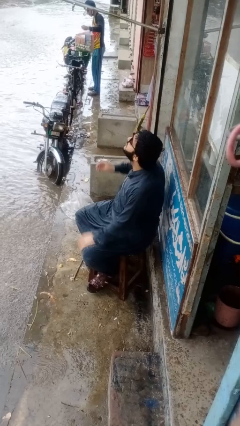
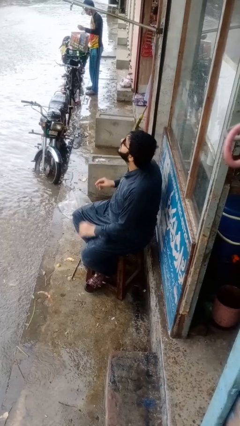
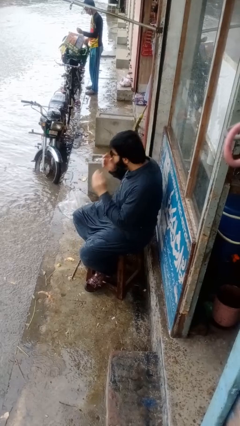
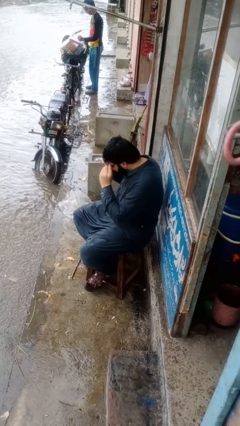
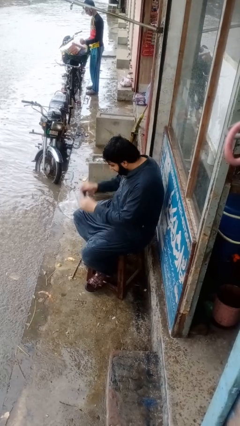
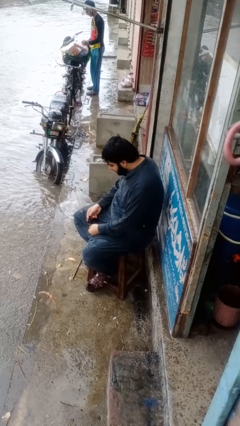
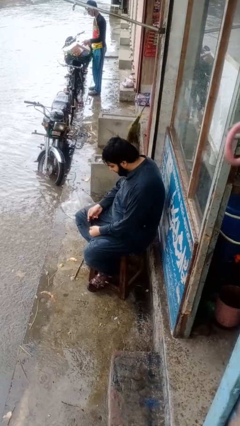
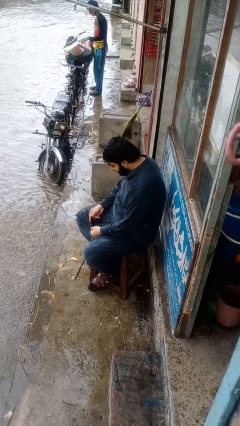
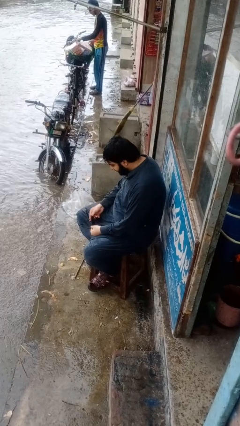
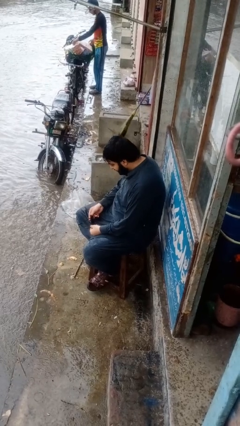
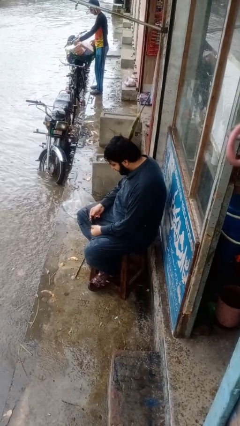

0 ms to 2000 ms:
person takes off glasses

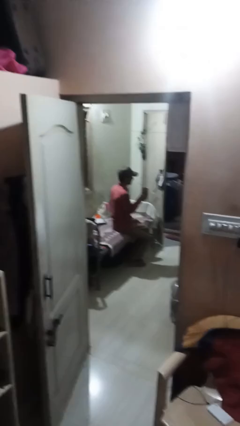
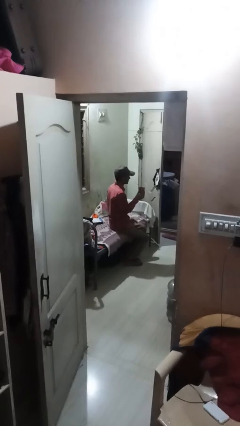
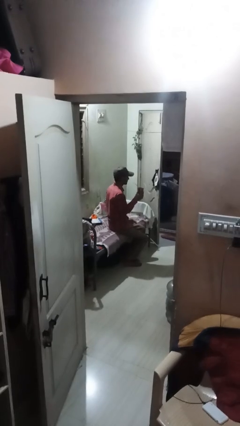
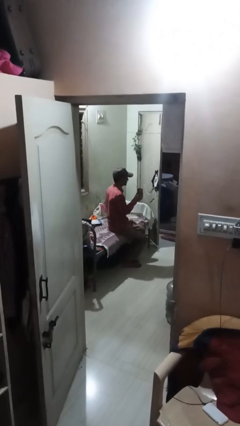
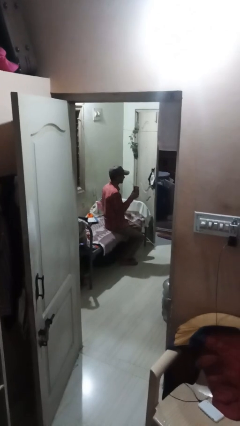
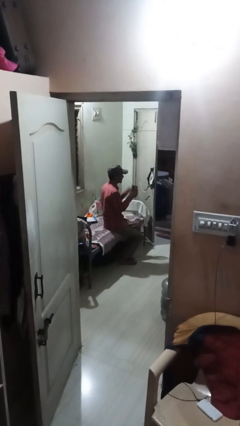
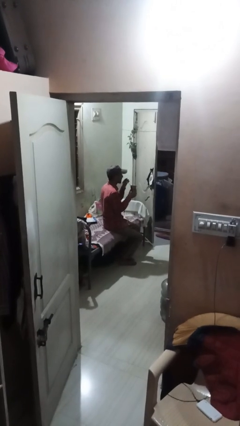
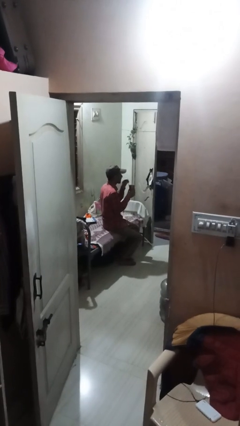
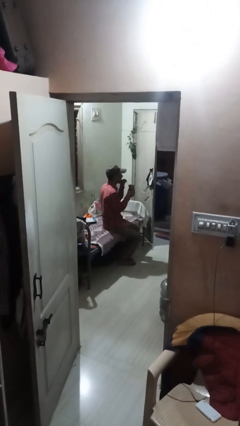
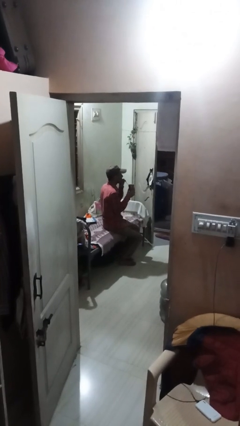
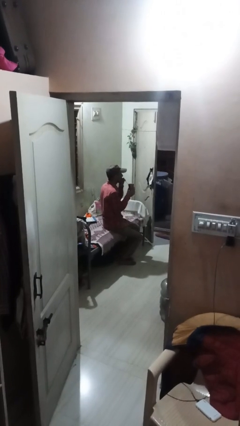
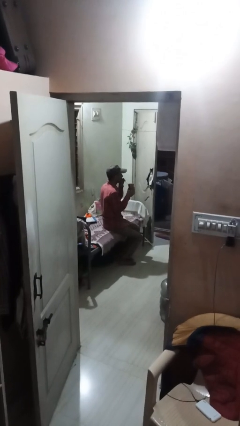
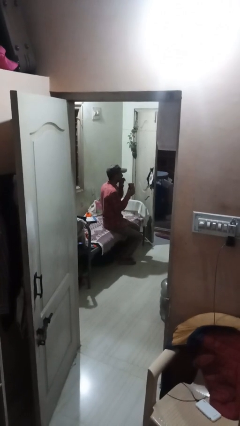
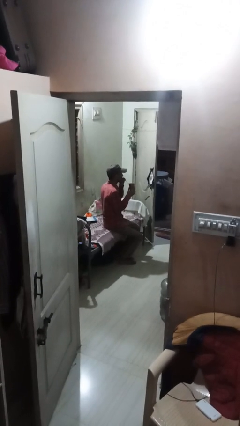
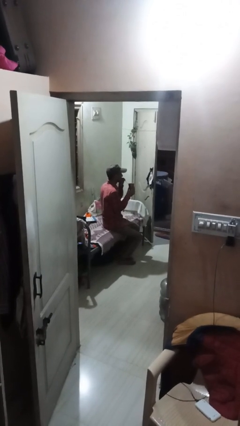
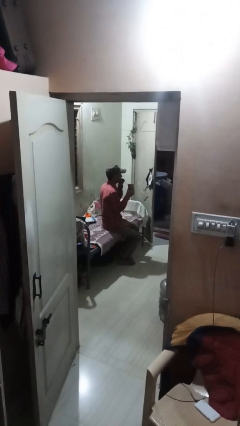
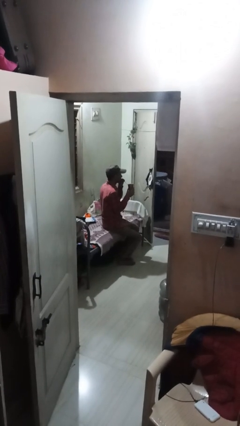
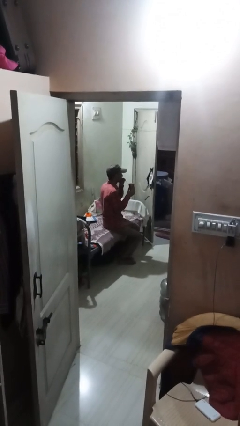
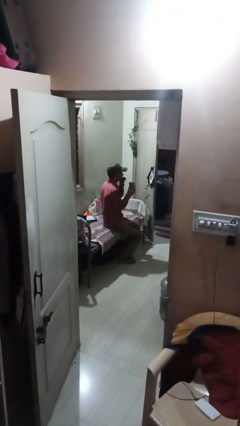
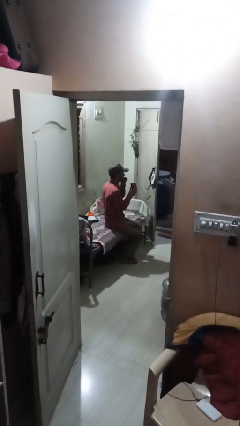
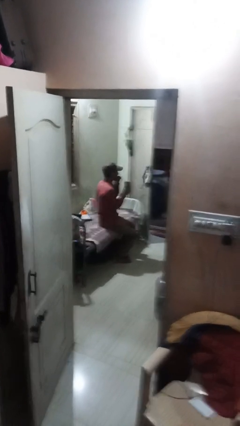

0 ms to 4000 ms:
person drinks from straw

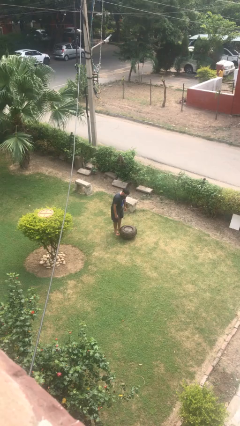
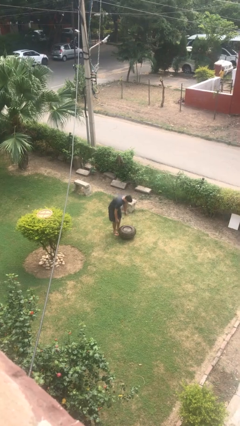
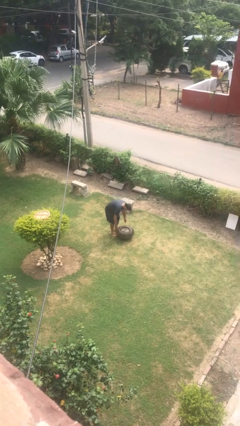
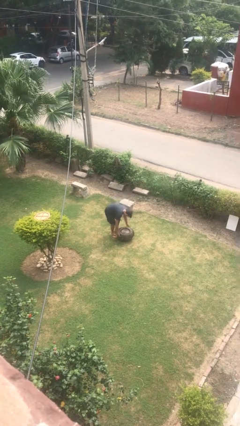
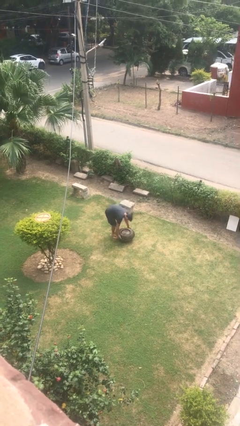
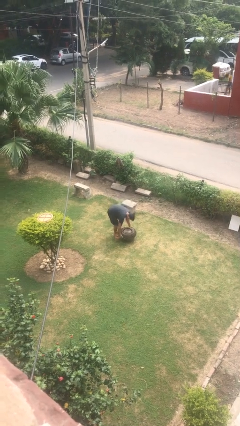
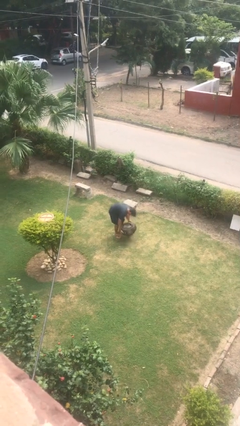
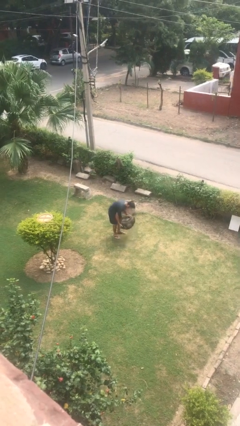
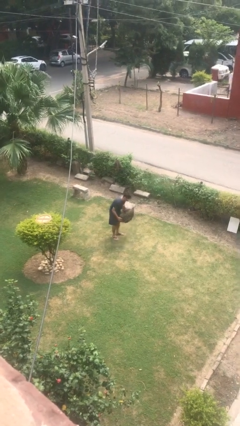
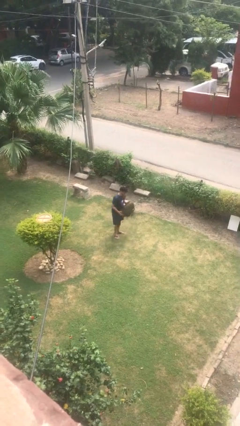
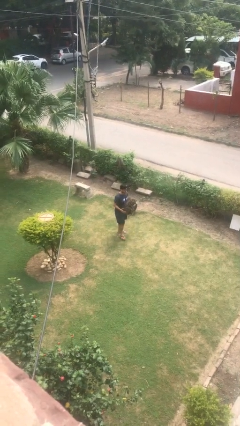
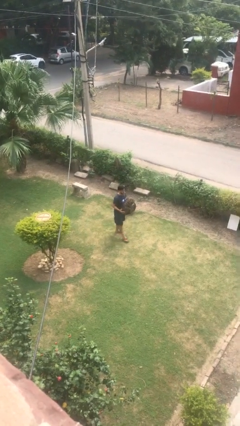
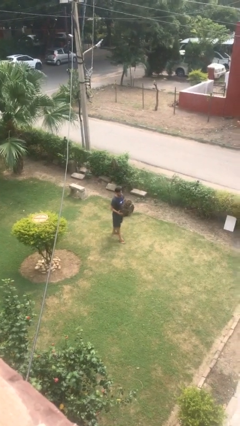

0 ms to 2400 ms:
person picks up object from floor

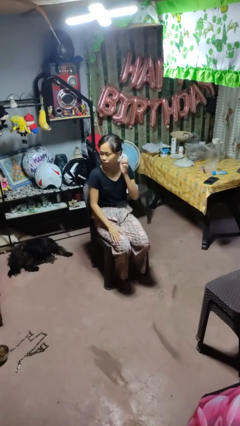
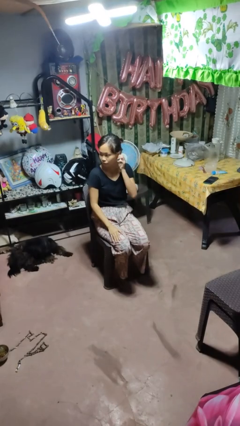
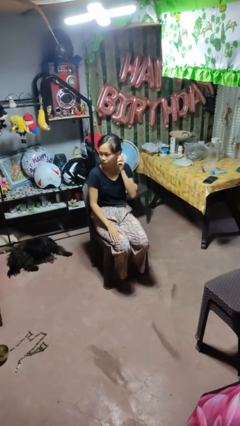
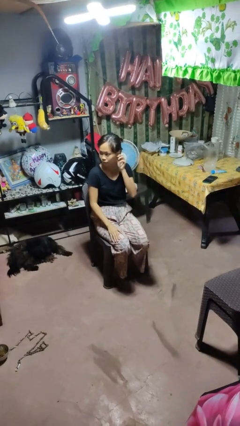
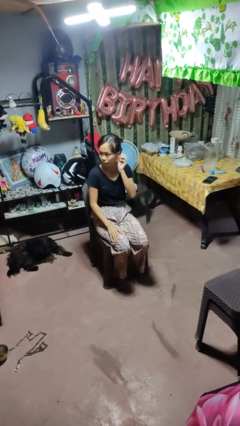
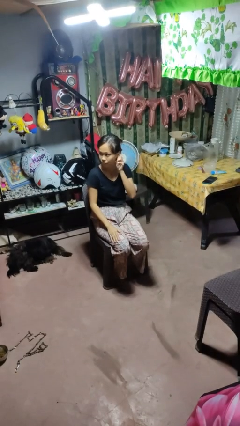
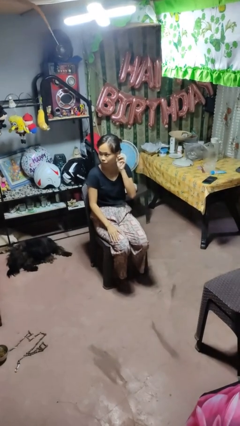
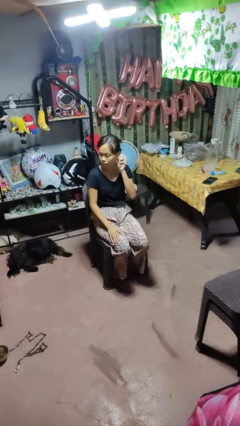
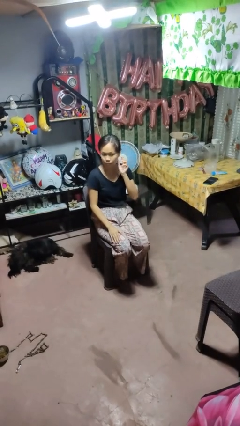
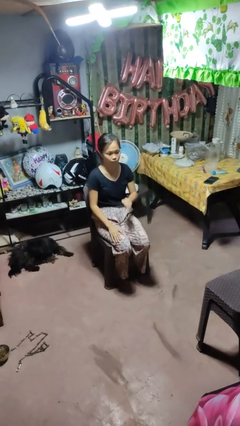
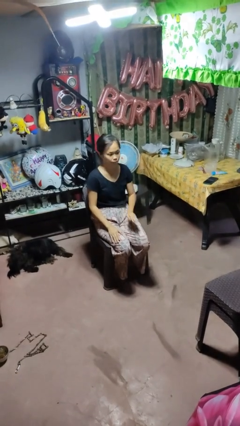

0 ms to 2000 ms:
person touches earlobe

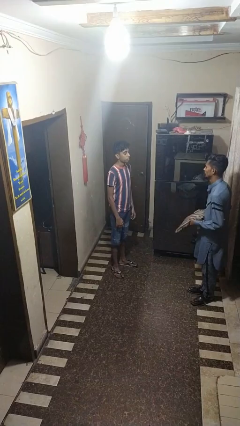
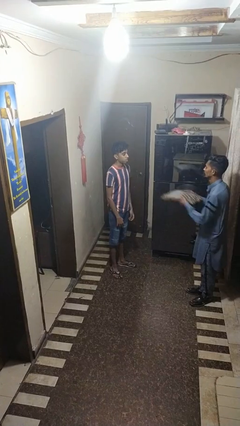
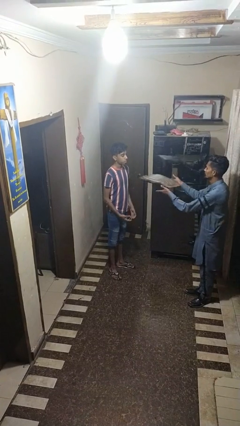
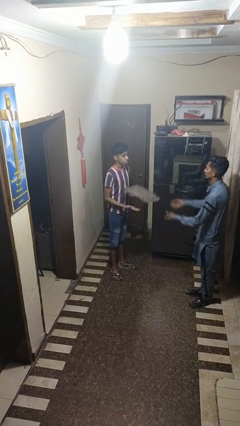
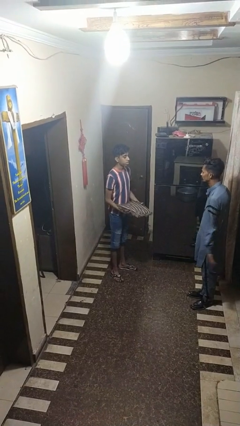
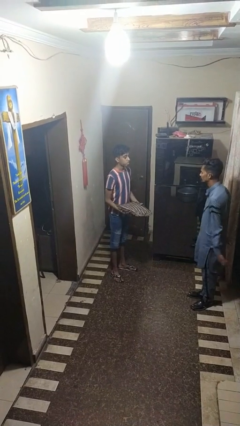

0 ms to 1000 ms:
person catches object from person

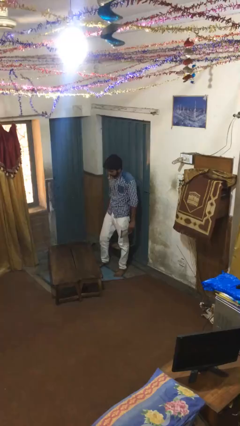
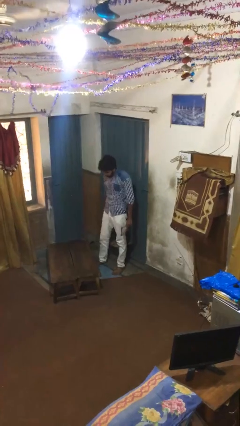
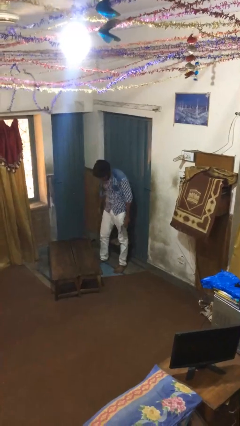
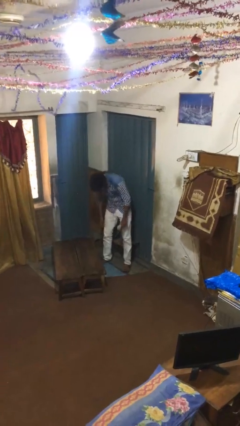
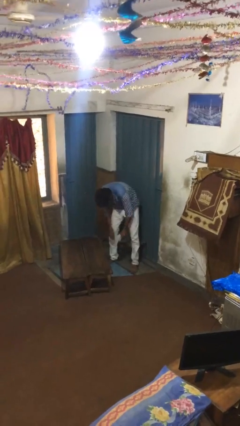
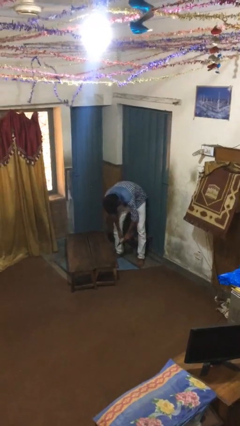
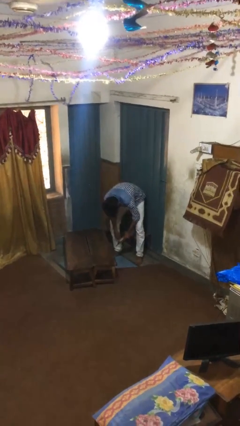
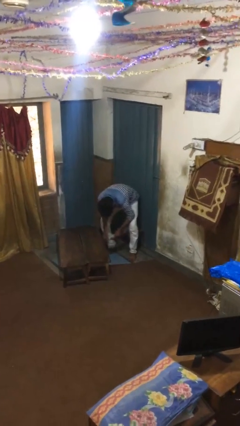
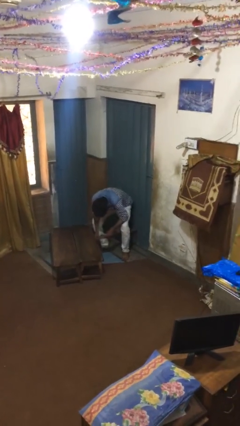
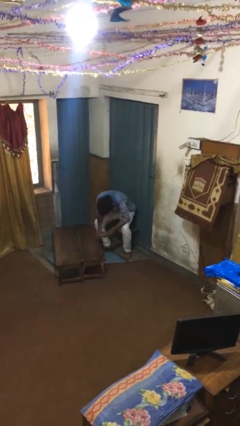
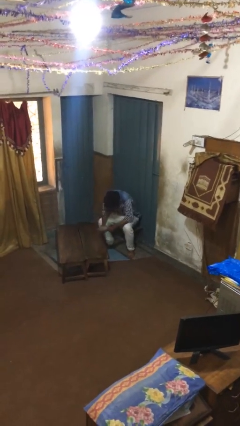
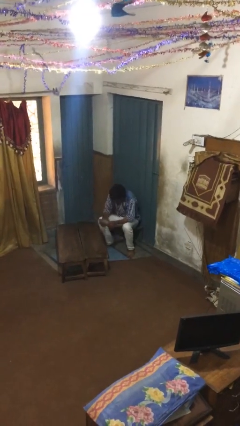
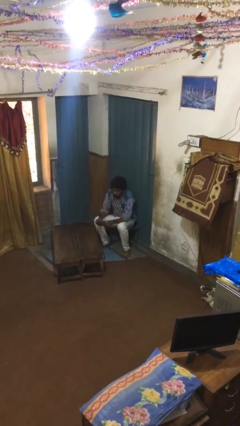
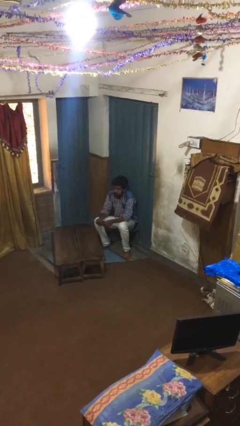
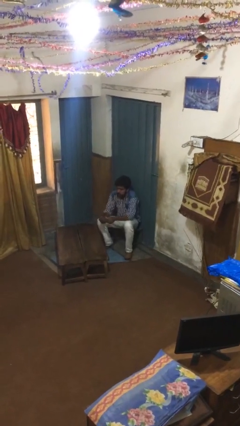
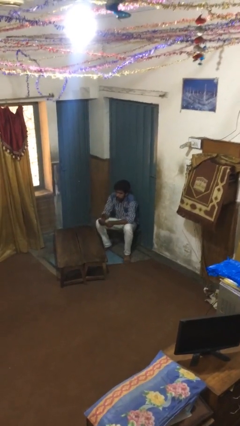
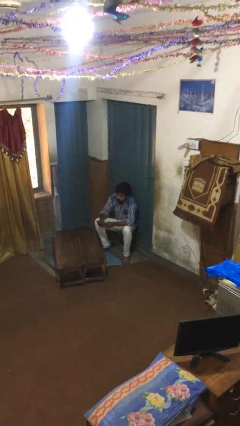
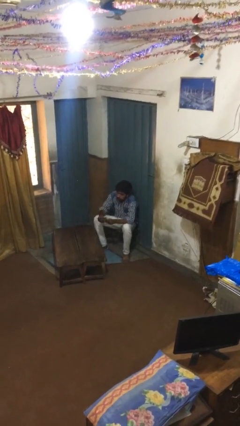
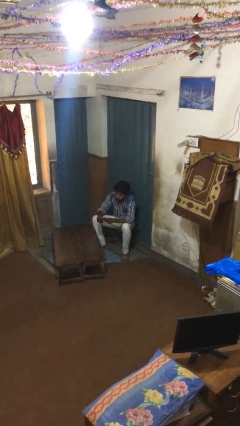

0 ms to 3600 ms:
person sits down

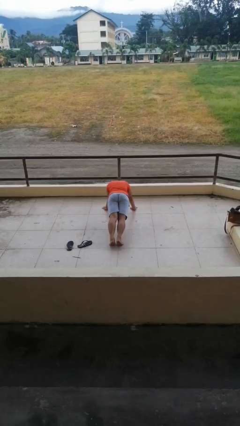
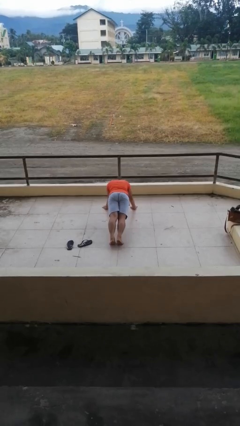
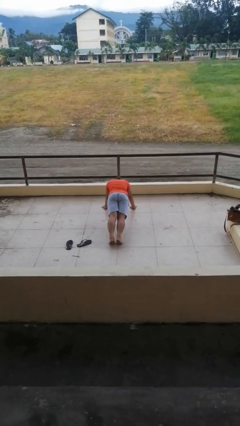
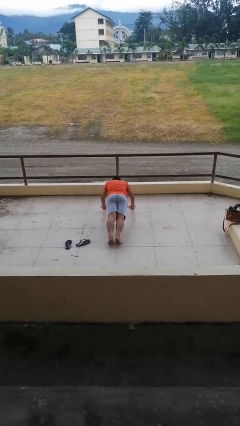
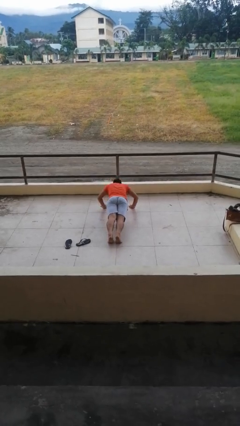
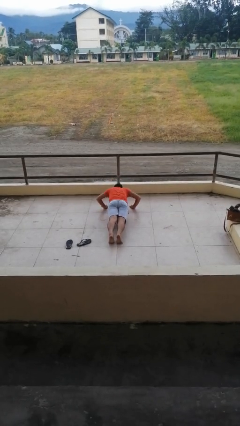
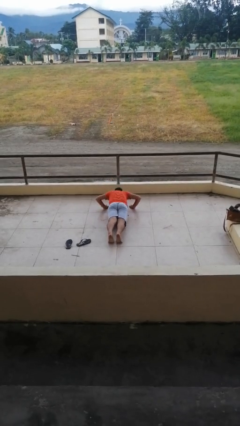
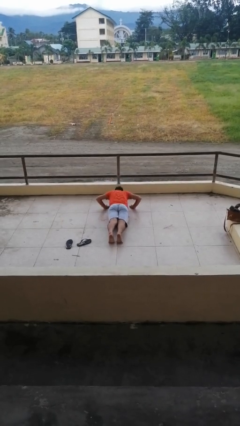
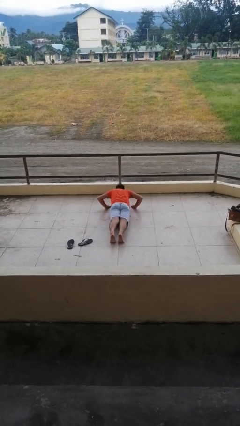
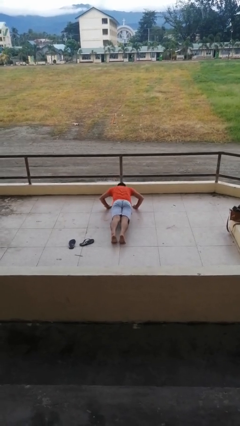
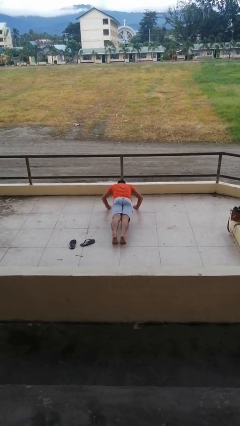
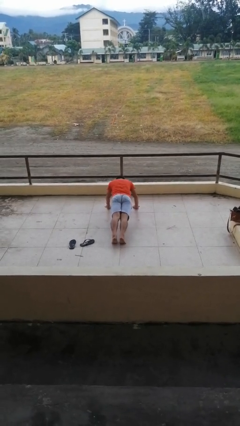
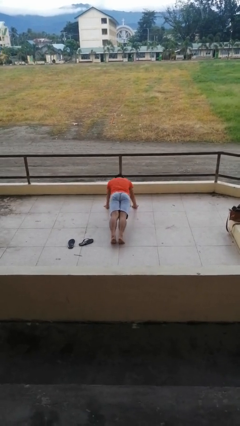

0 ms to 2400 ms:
person exercises with pushup
